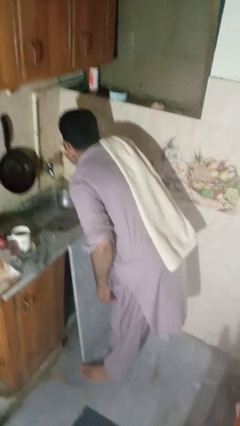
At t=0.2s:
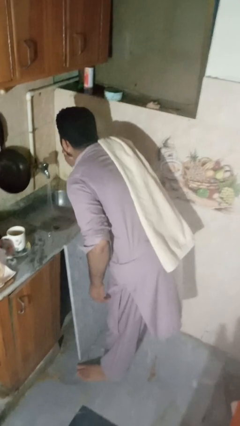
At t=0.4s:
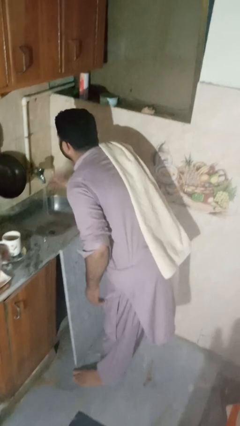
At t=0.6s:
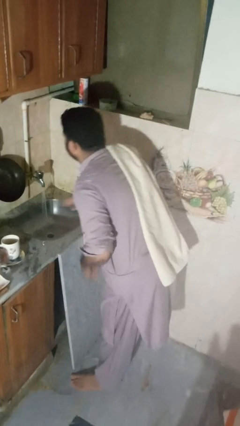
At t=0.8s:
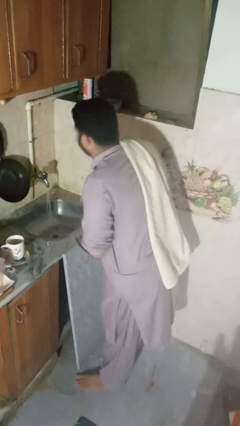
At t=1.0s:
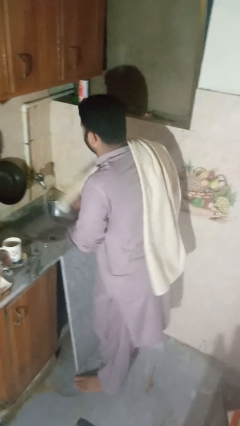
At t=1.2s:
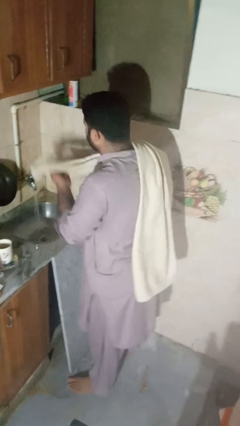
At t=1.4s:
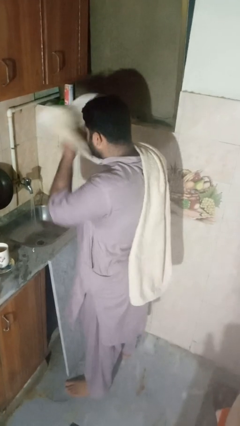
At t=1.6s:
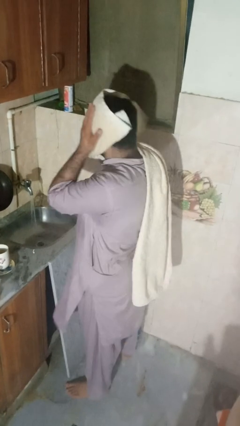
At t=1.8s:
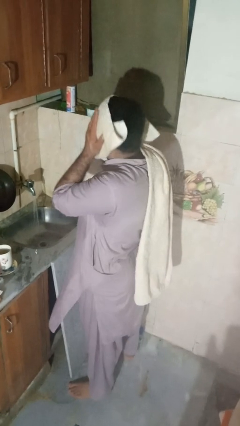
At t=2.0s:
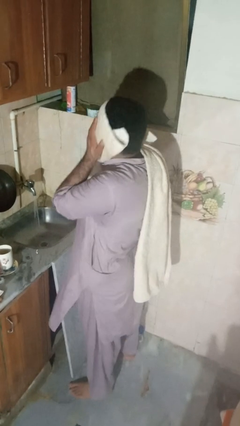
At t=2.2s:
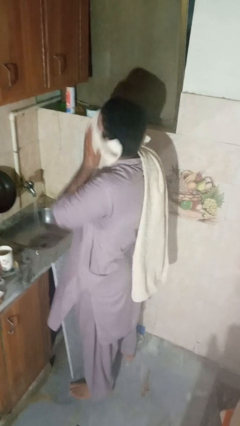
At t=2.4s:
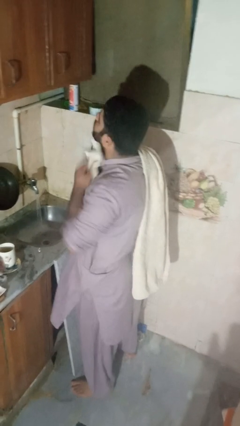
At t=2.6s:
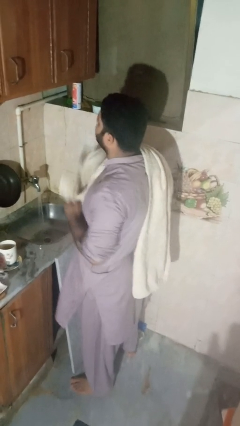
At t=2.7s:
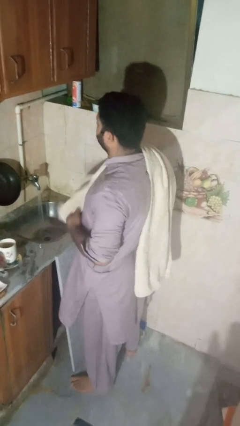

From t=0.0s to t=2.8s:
person dries face with towel

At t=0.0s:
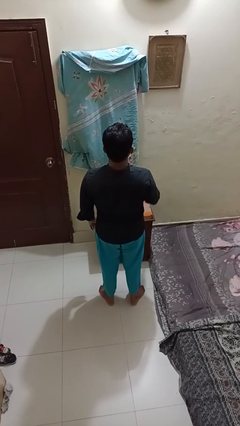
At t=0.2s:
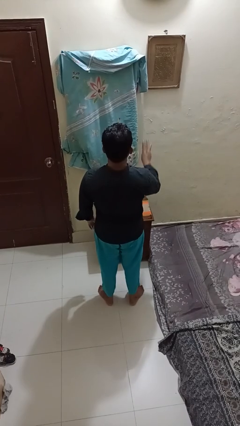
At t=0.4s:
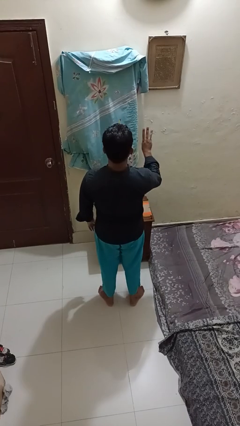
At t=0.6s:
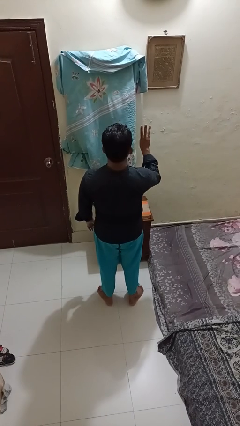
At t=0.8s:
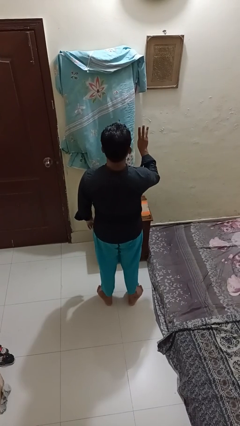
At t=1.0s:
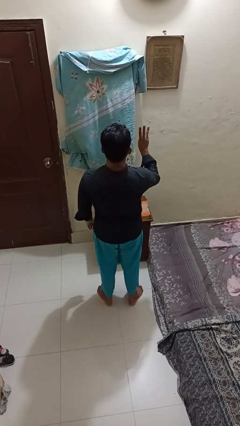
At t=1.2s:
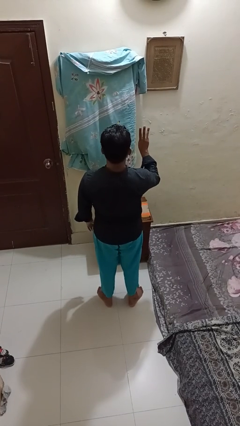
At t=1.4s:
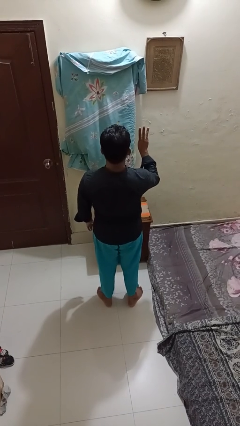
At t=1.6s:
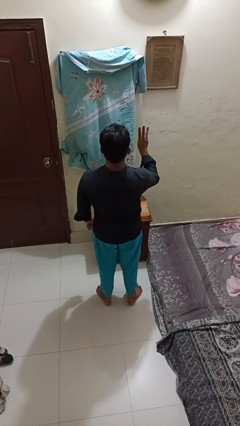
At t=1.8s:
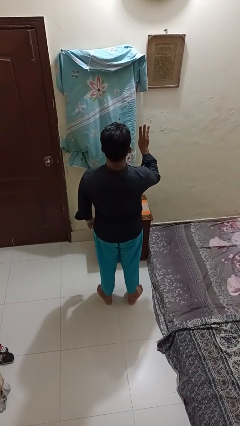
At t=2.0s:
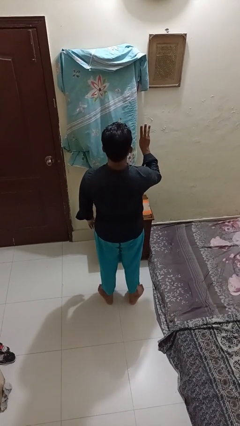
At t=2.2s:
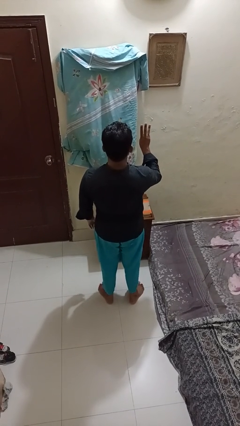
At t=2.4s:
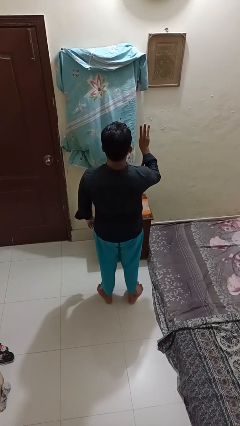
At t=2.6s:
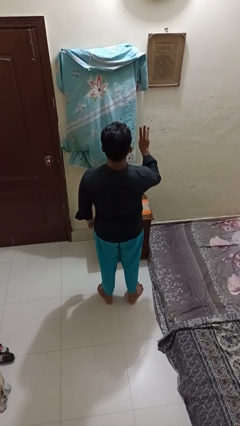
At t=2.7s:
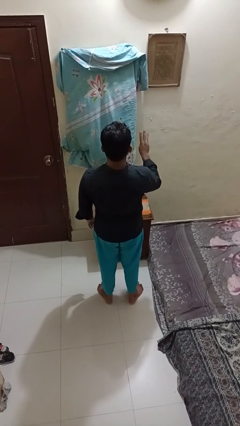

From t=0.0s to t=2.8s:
person gestures number three

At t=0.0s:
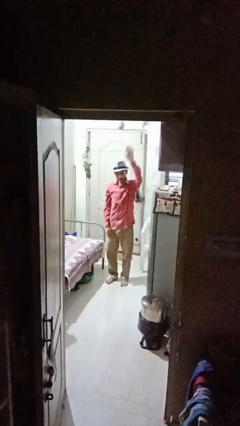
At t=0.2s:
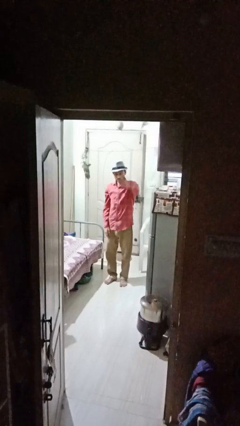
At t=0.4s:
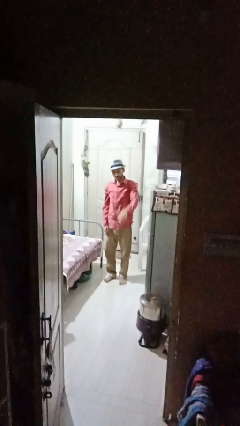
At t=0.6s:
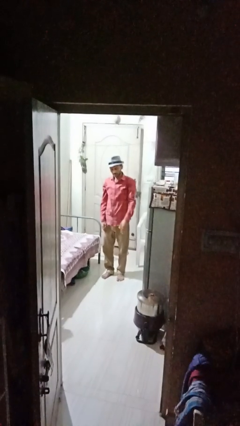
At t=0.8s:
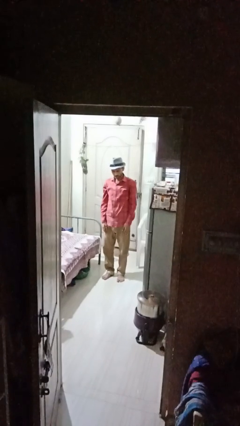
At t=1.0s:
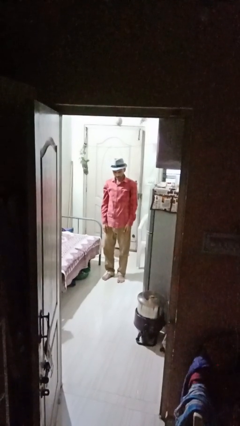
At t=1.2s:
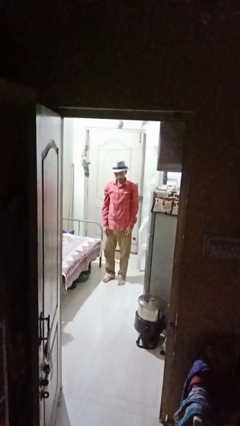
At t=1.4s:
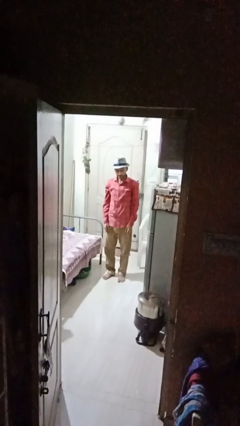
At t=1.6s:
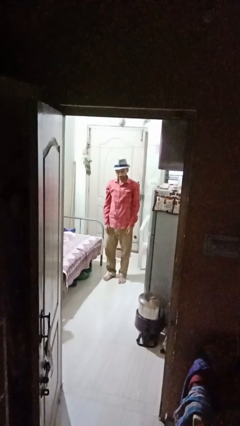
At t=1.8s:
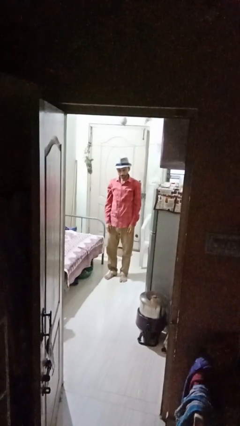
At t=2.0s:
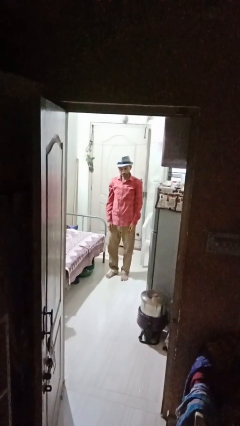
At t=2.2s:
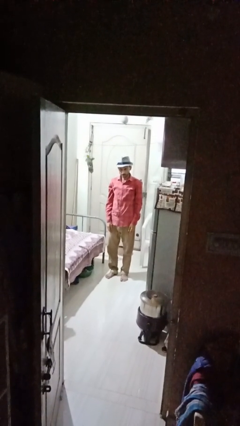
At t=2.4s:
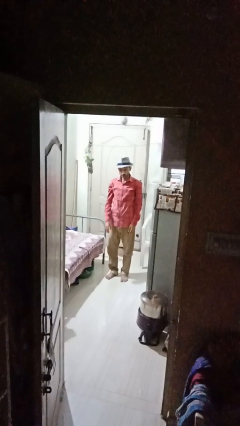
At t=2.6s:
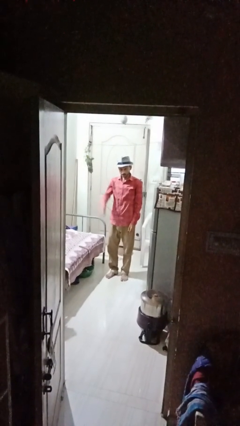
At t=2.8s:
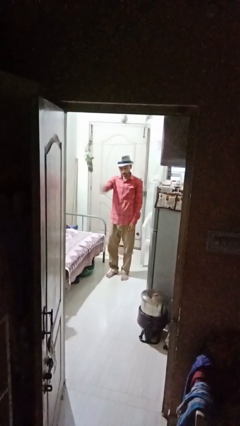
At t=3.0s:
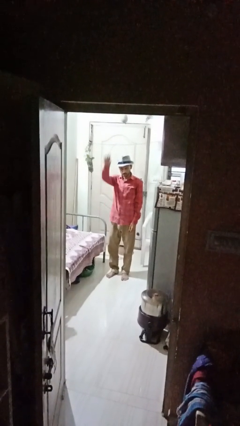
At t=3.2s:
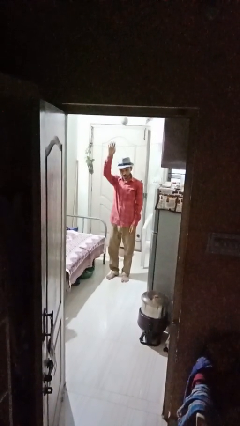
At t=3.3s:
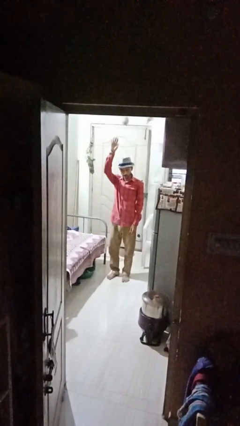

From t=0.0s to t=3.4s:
person gestures lower hand

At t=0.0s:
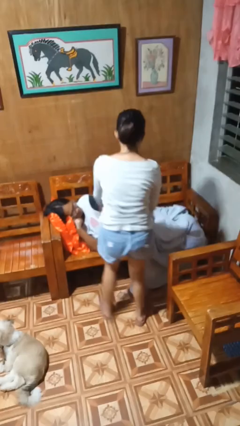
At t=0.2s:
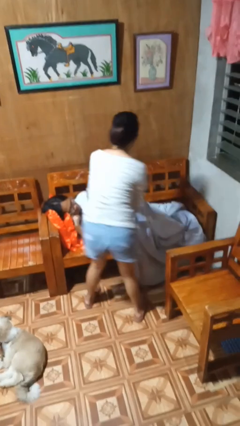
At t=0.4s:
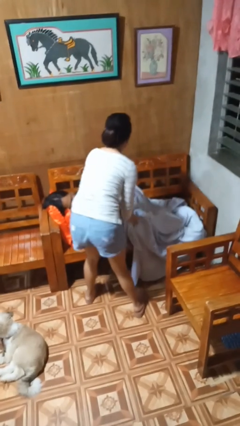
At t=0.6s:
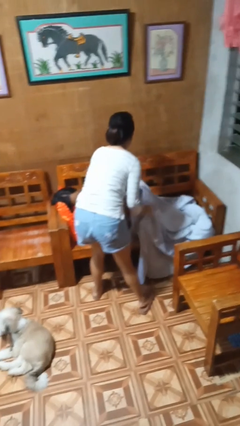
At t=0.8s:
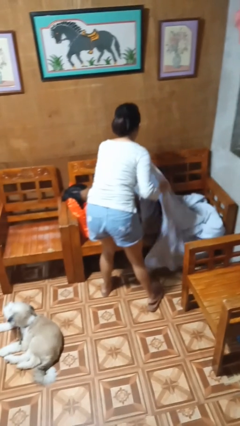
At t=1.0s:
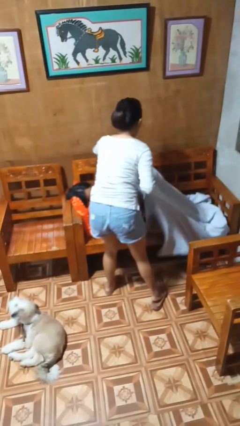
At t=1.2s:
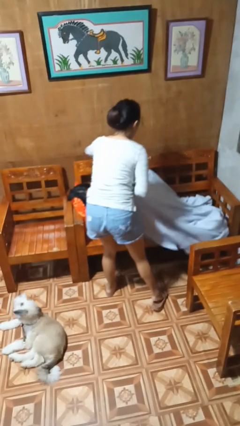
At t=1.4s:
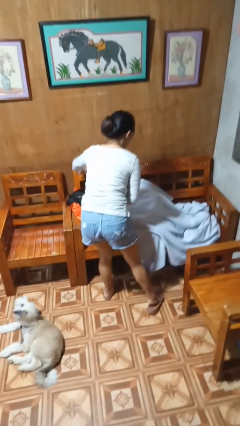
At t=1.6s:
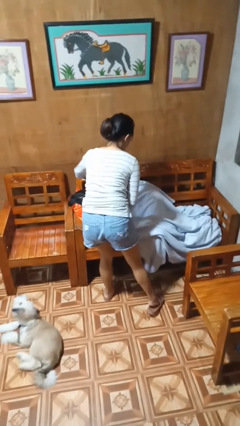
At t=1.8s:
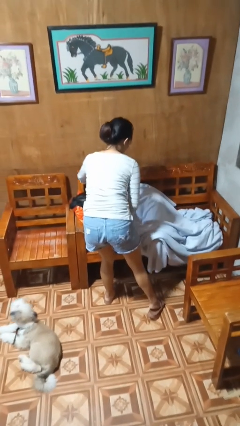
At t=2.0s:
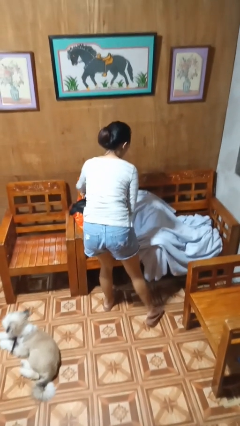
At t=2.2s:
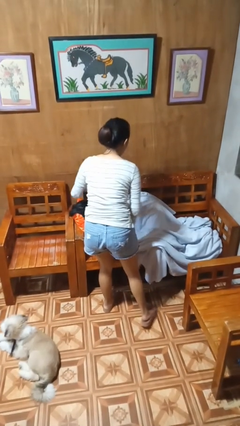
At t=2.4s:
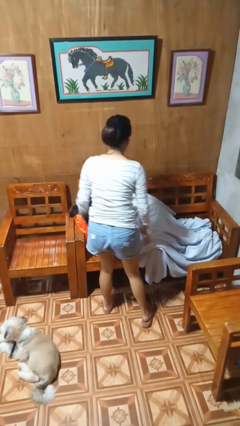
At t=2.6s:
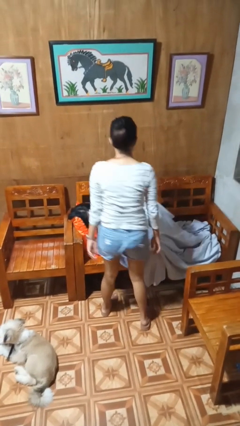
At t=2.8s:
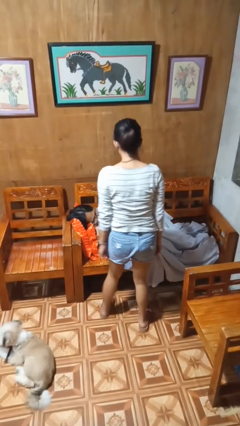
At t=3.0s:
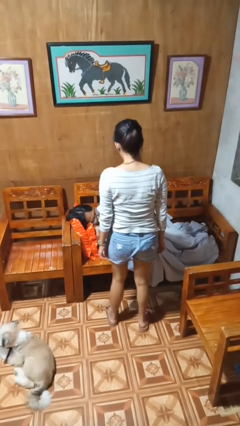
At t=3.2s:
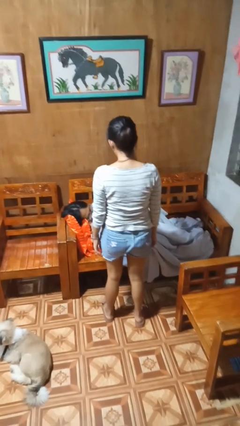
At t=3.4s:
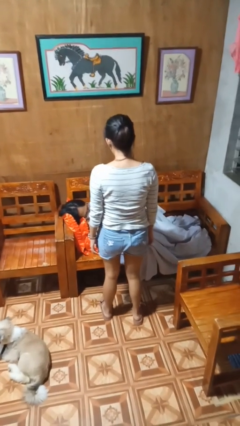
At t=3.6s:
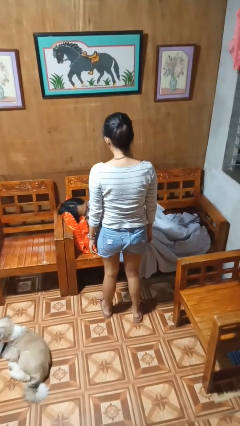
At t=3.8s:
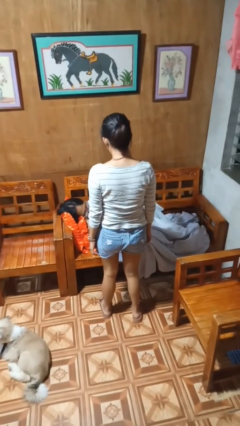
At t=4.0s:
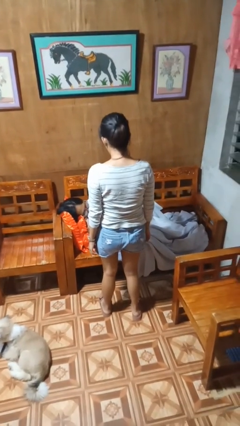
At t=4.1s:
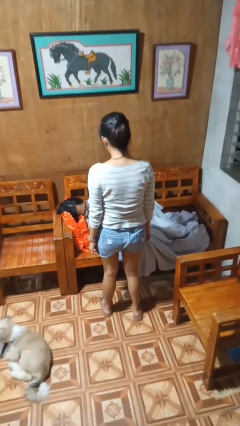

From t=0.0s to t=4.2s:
person covers friend with blanket

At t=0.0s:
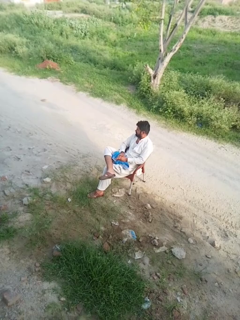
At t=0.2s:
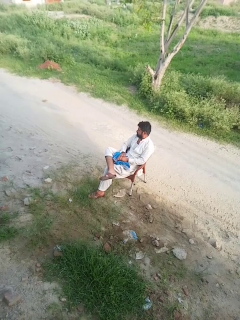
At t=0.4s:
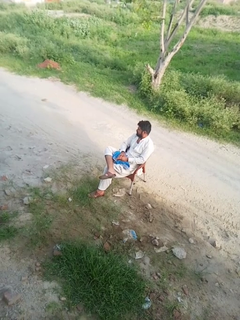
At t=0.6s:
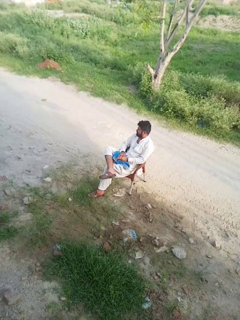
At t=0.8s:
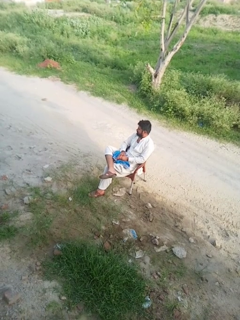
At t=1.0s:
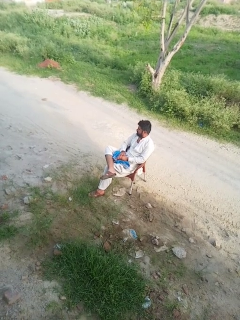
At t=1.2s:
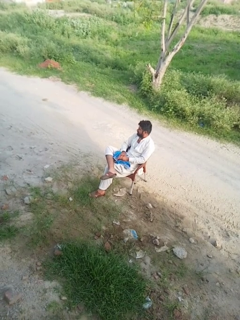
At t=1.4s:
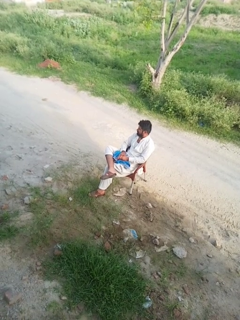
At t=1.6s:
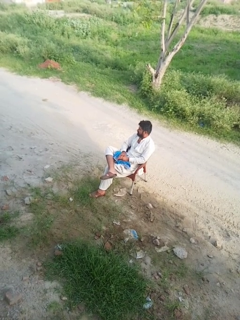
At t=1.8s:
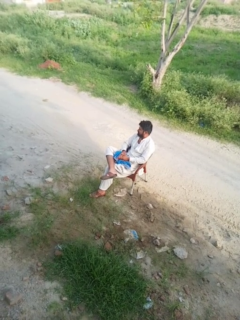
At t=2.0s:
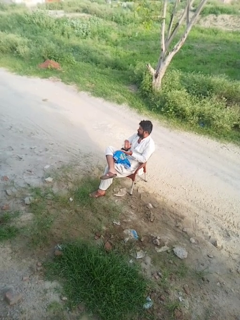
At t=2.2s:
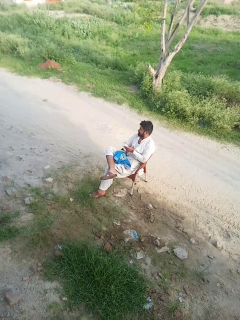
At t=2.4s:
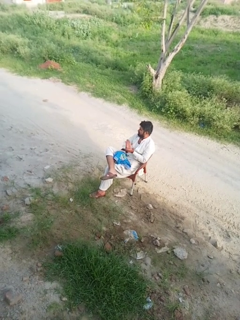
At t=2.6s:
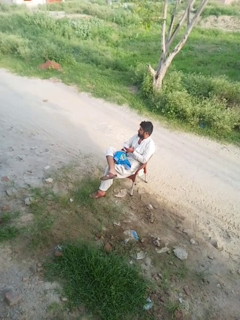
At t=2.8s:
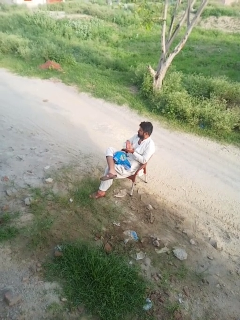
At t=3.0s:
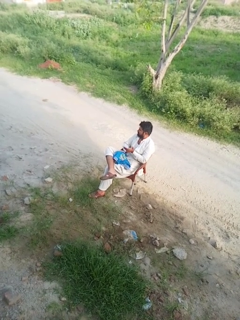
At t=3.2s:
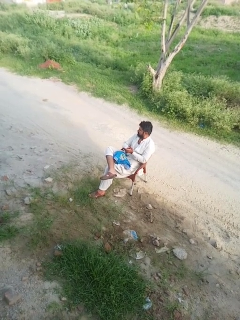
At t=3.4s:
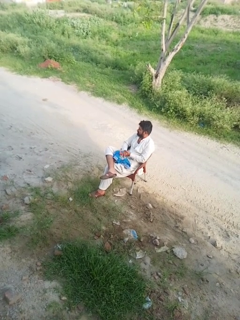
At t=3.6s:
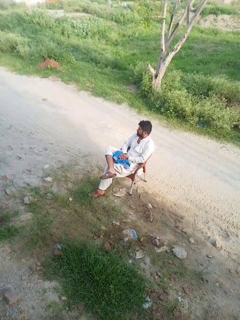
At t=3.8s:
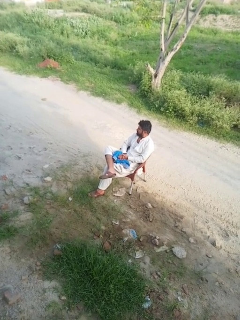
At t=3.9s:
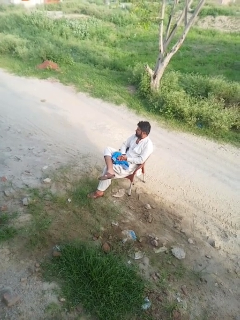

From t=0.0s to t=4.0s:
person claps hands

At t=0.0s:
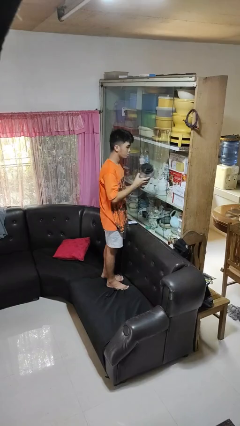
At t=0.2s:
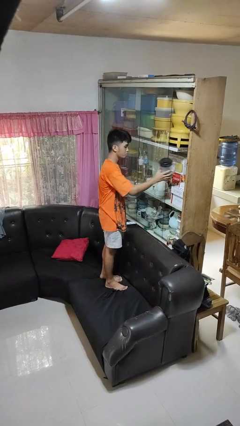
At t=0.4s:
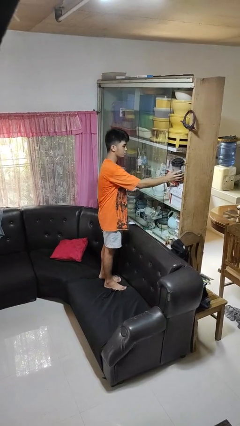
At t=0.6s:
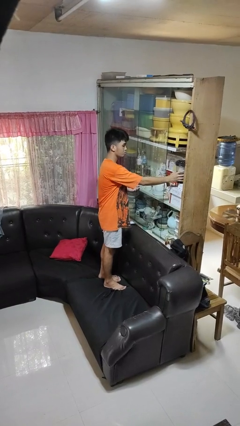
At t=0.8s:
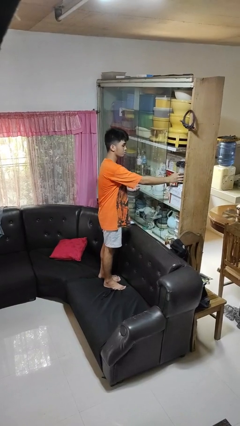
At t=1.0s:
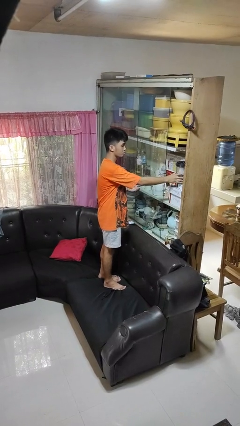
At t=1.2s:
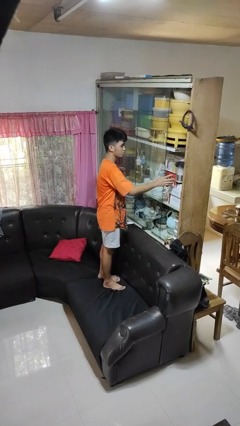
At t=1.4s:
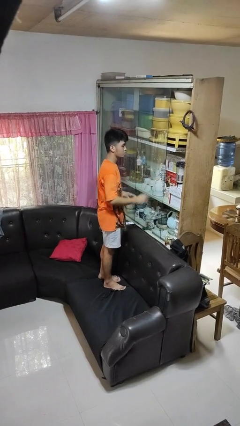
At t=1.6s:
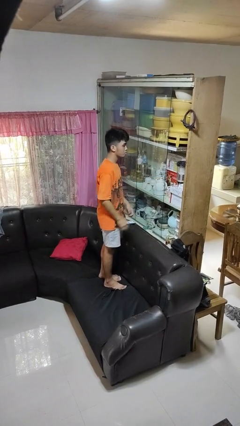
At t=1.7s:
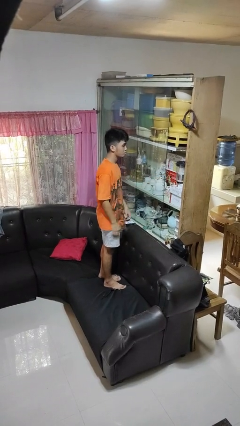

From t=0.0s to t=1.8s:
person puts down object into cabinet
